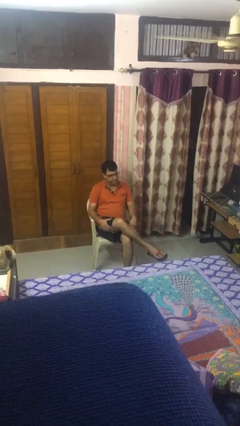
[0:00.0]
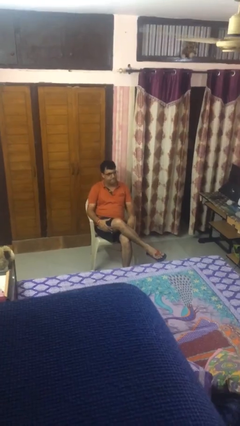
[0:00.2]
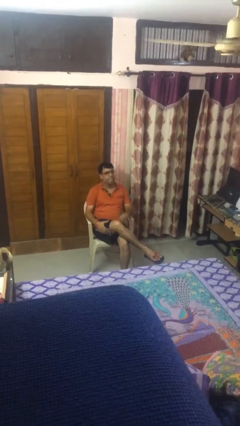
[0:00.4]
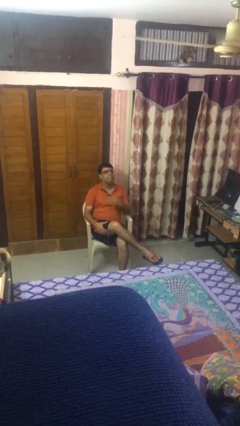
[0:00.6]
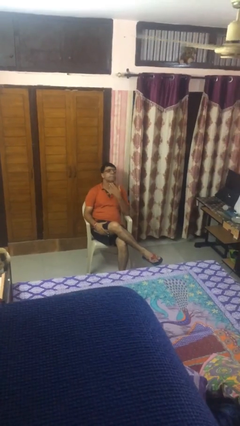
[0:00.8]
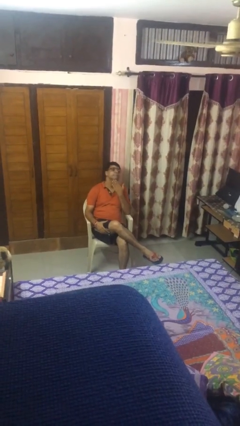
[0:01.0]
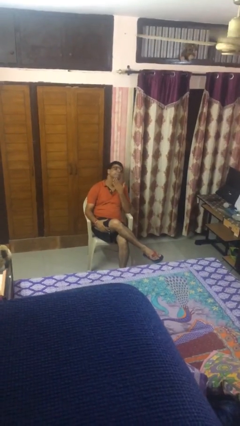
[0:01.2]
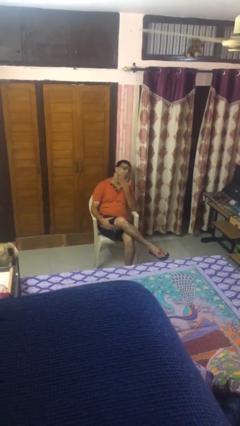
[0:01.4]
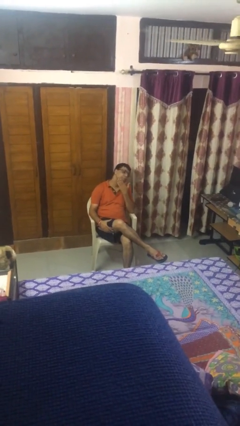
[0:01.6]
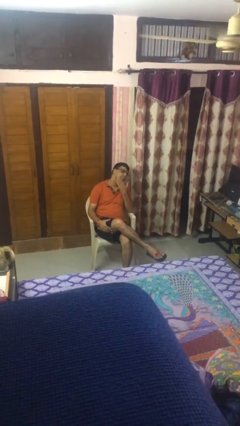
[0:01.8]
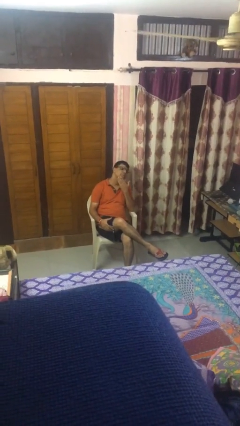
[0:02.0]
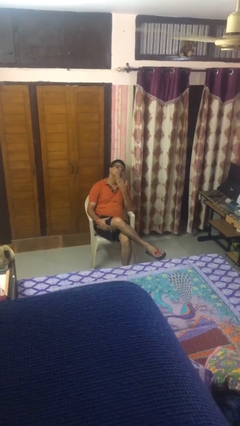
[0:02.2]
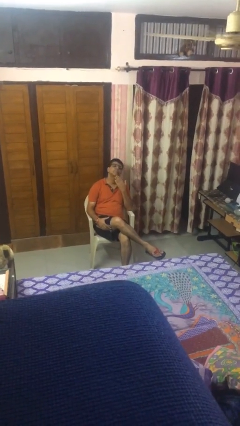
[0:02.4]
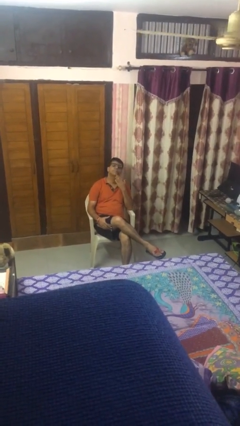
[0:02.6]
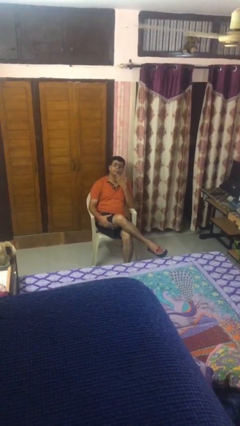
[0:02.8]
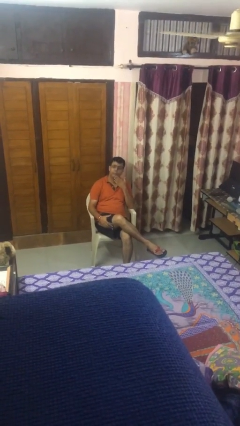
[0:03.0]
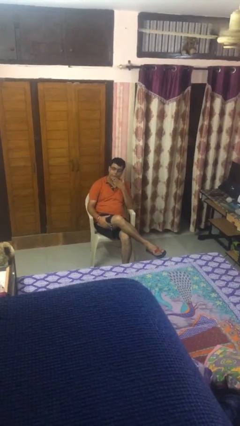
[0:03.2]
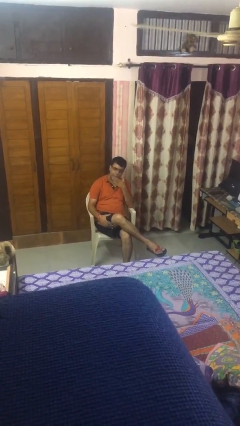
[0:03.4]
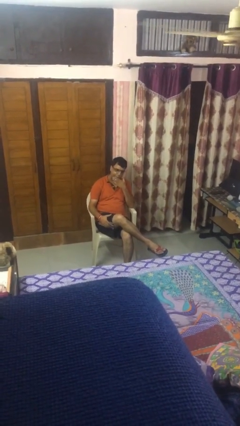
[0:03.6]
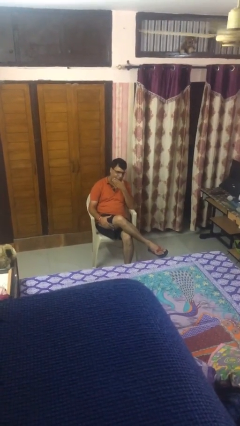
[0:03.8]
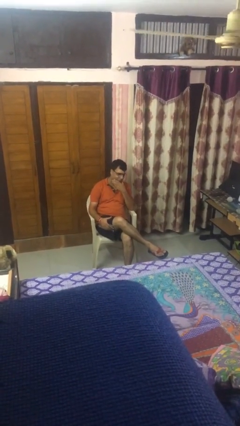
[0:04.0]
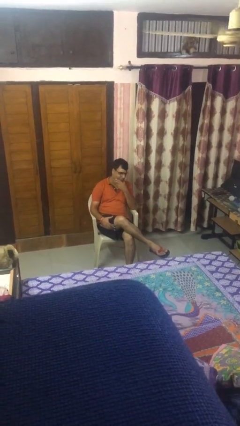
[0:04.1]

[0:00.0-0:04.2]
person strokes chin

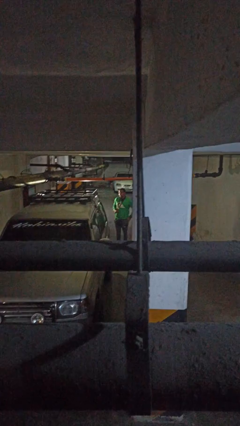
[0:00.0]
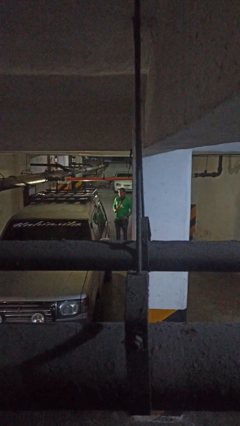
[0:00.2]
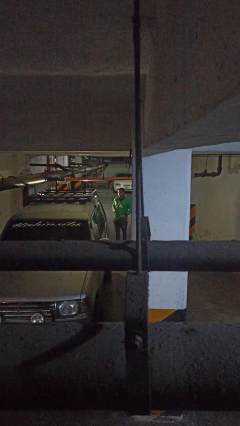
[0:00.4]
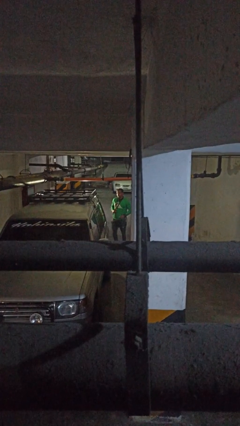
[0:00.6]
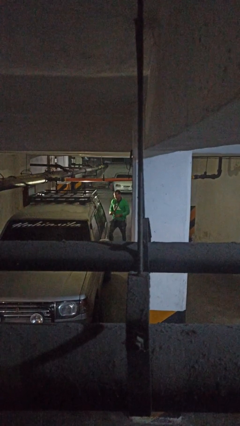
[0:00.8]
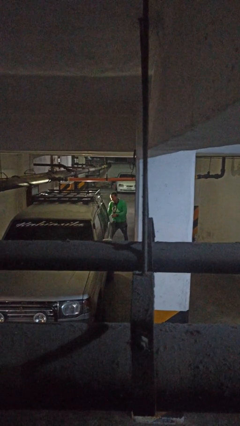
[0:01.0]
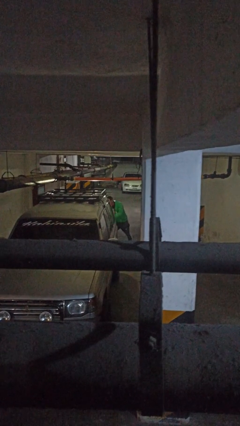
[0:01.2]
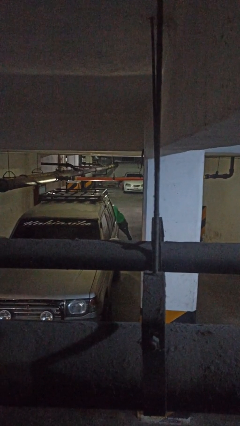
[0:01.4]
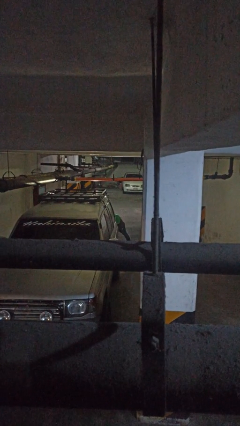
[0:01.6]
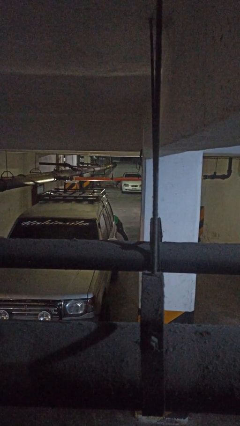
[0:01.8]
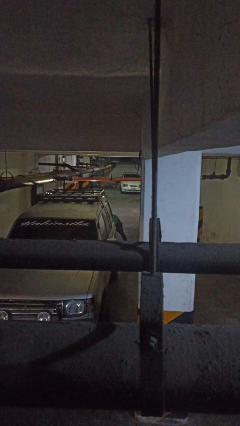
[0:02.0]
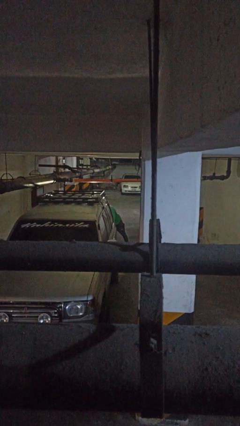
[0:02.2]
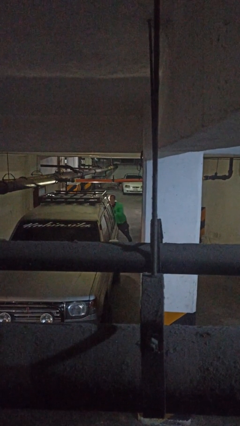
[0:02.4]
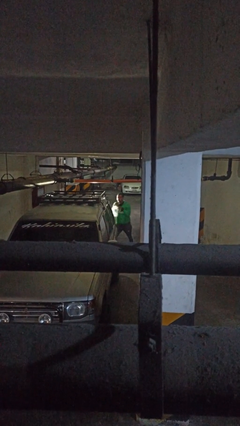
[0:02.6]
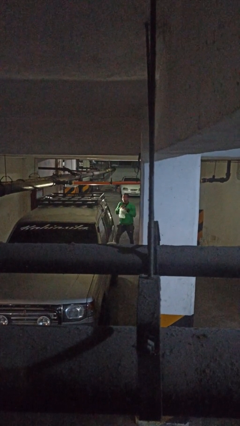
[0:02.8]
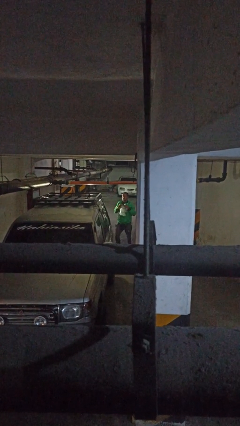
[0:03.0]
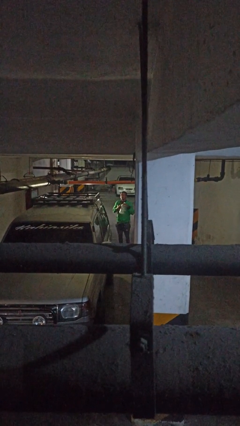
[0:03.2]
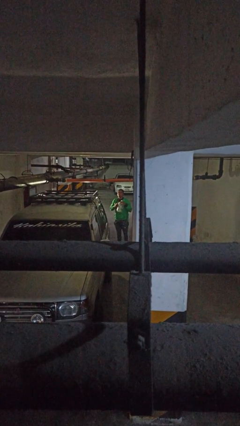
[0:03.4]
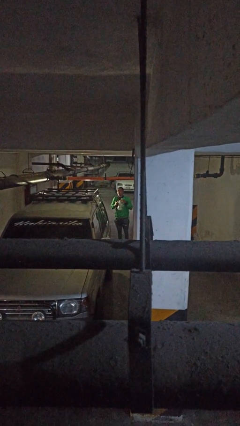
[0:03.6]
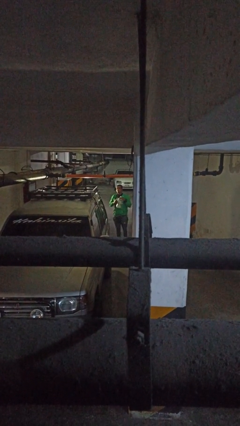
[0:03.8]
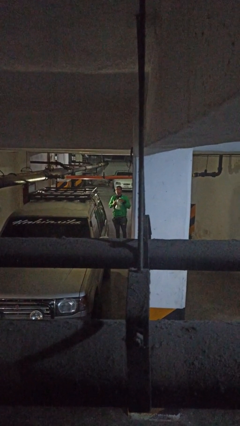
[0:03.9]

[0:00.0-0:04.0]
person unloads car

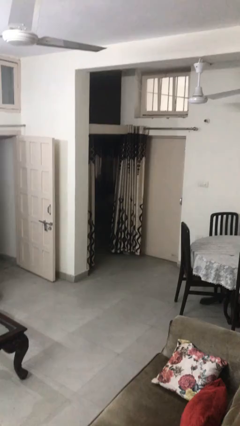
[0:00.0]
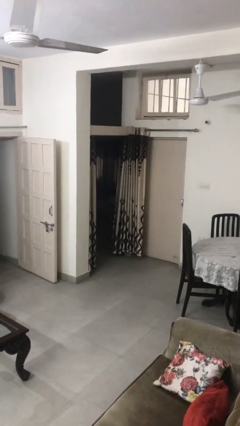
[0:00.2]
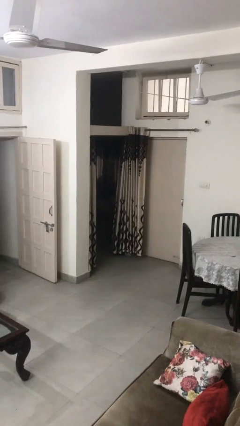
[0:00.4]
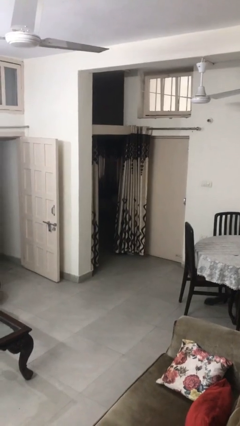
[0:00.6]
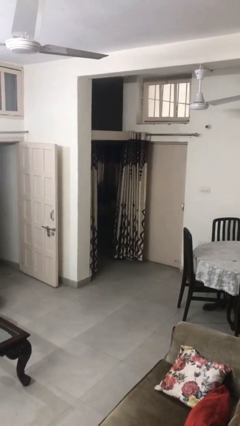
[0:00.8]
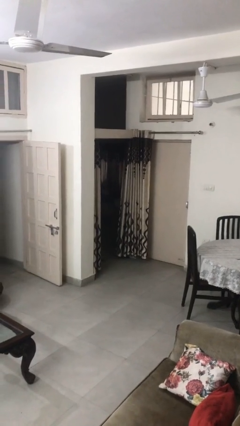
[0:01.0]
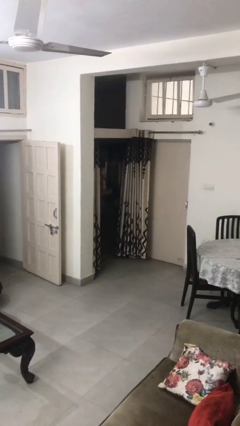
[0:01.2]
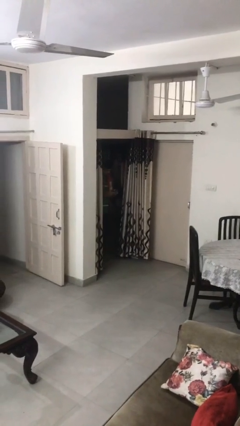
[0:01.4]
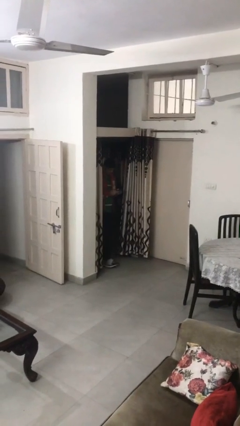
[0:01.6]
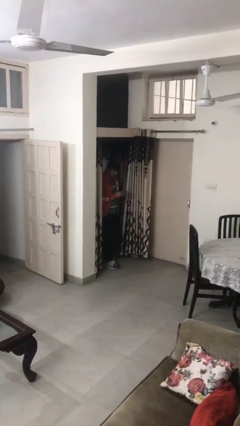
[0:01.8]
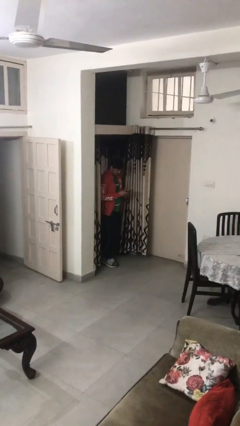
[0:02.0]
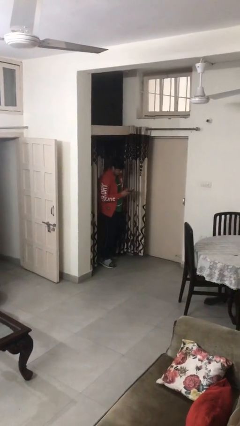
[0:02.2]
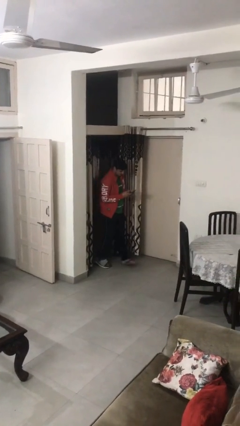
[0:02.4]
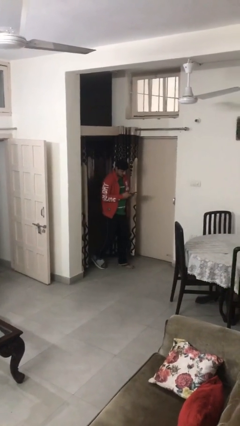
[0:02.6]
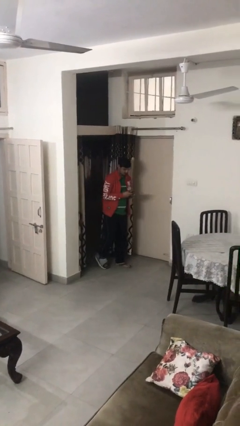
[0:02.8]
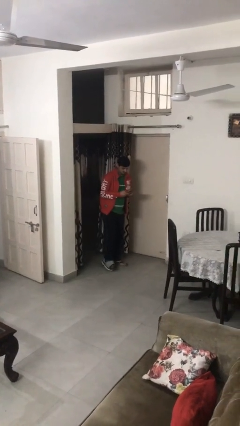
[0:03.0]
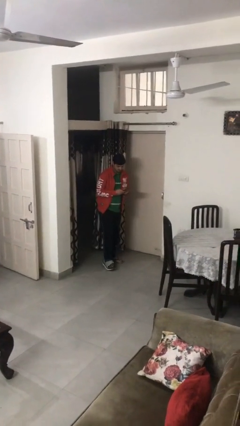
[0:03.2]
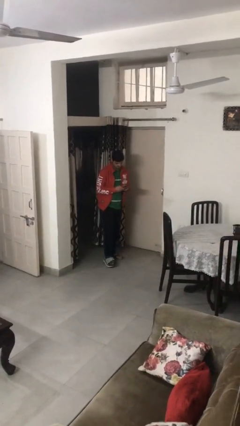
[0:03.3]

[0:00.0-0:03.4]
person enters scene through structure

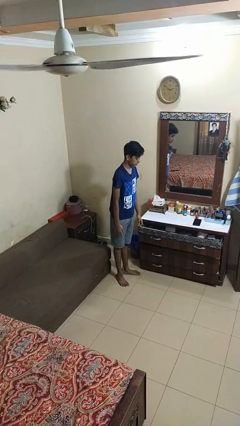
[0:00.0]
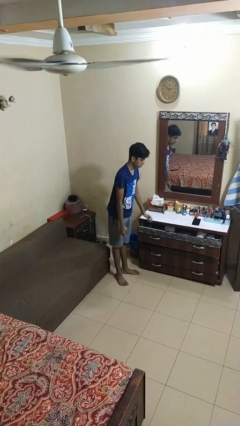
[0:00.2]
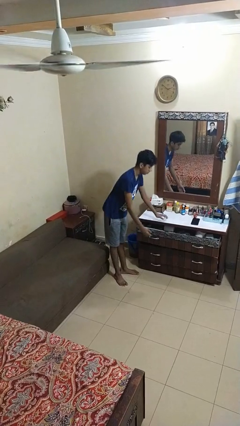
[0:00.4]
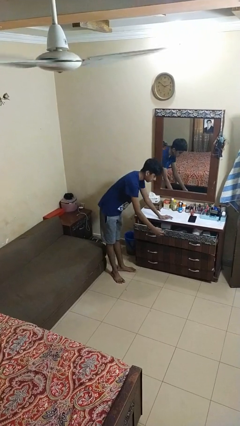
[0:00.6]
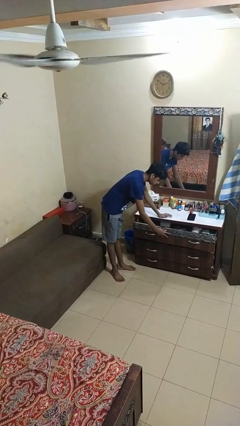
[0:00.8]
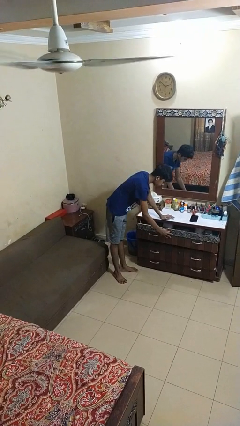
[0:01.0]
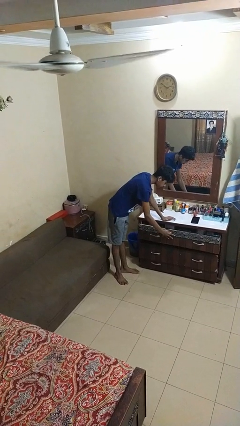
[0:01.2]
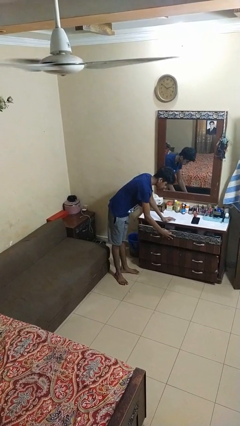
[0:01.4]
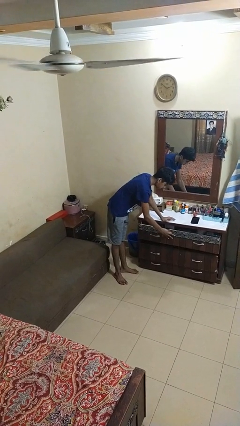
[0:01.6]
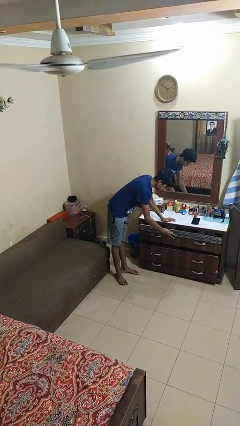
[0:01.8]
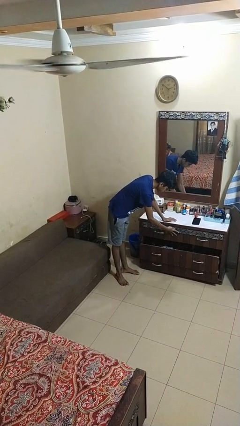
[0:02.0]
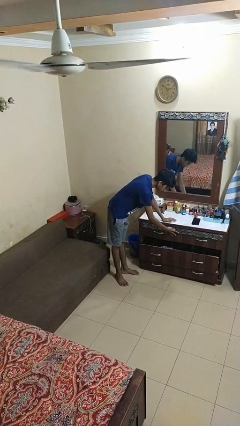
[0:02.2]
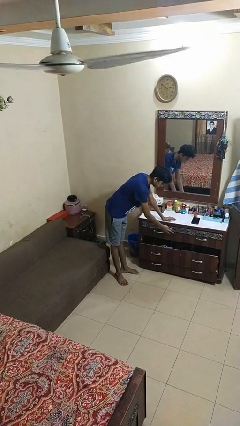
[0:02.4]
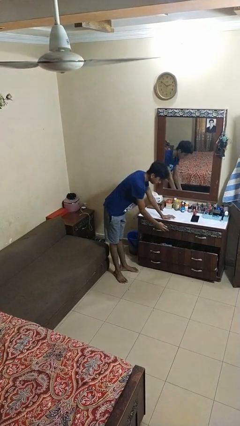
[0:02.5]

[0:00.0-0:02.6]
person closes dresser drawer

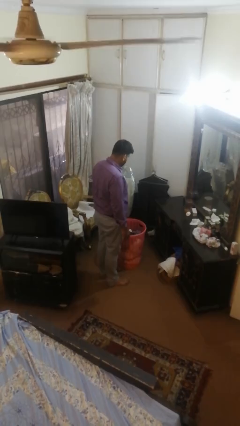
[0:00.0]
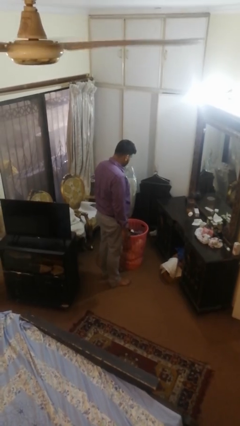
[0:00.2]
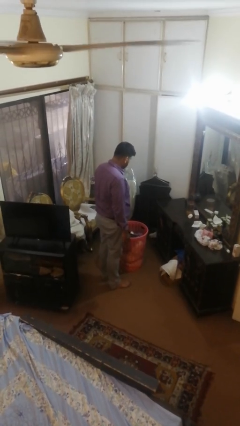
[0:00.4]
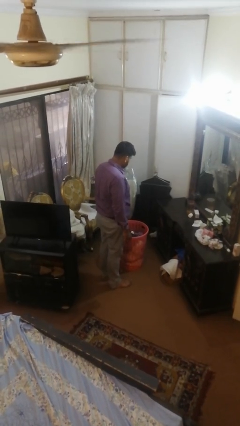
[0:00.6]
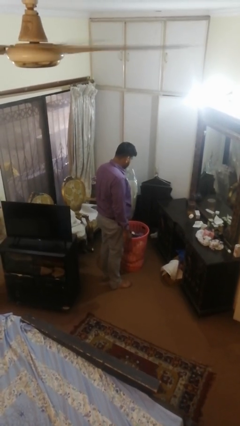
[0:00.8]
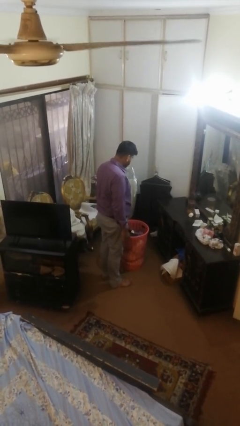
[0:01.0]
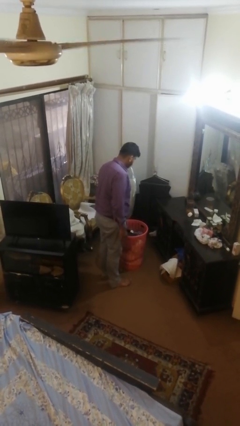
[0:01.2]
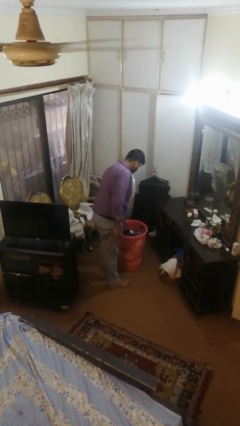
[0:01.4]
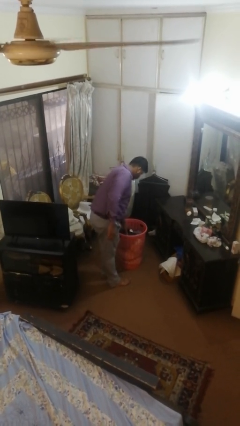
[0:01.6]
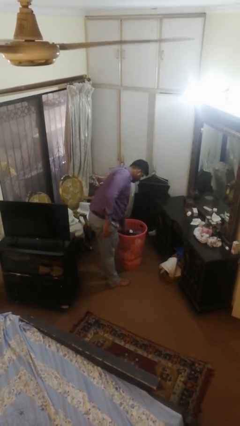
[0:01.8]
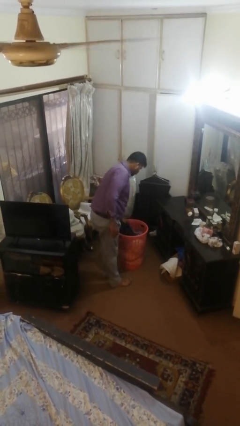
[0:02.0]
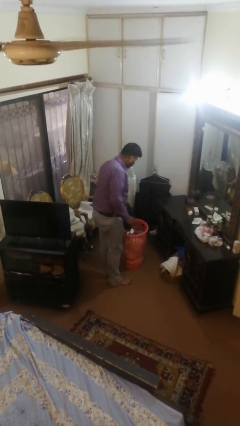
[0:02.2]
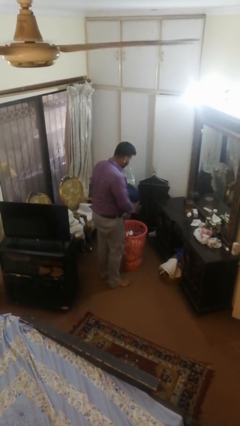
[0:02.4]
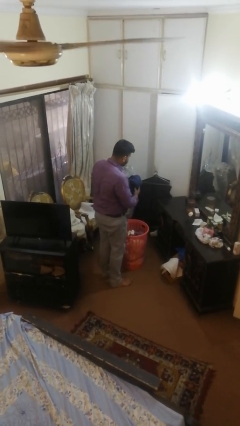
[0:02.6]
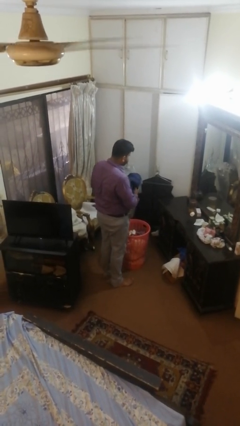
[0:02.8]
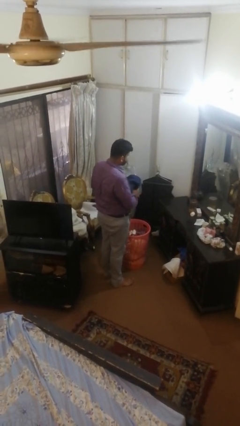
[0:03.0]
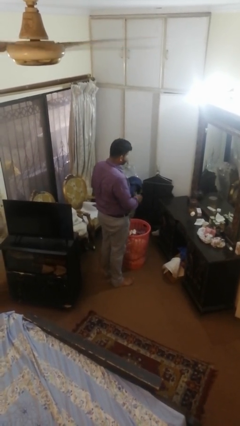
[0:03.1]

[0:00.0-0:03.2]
person takes object from basket
